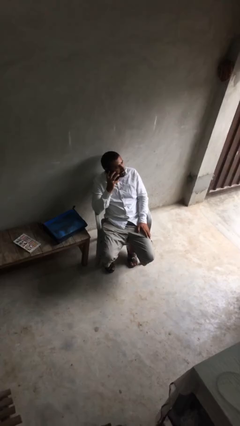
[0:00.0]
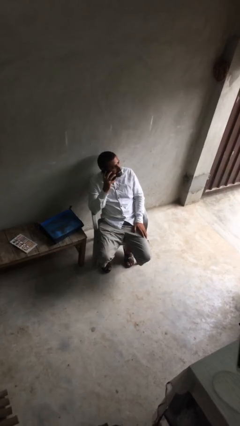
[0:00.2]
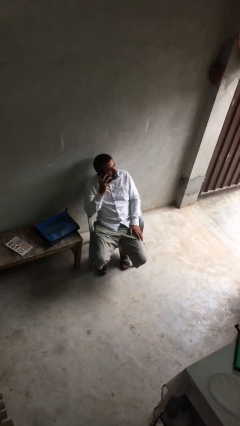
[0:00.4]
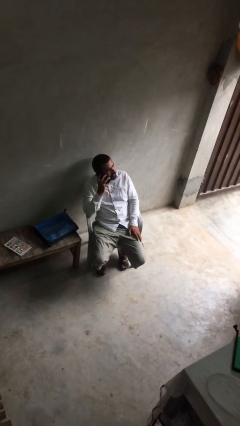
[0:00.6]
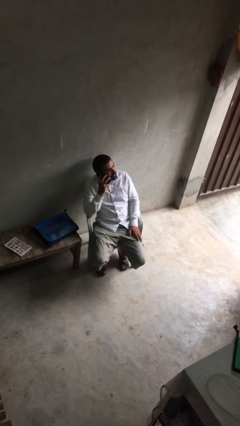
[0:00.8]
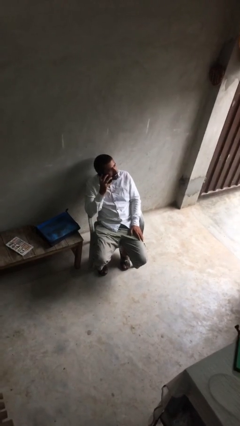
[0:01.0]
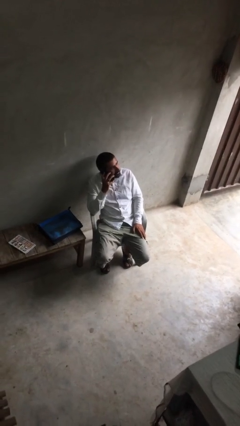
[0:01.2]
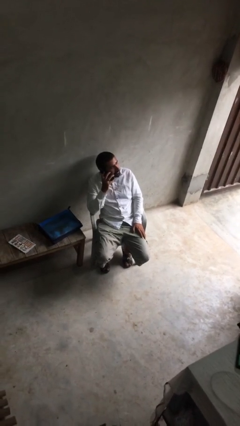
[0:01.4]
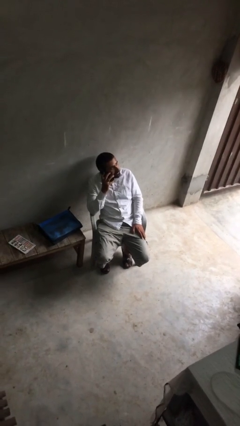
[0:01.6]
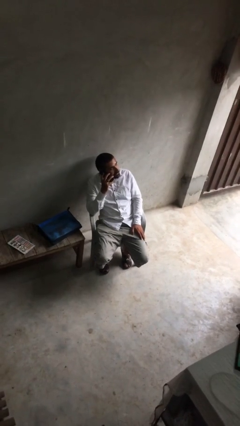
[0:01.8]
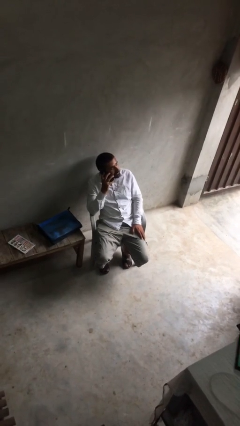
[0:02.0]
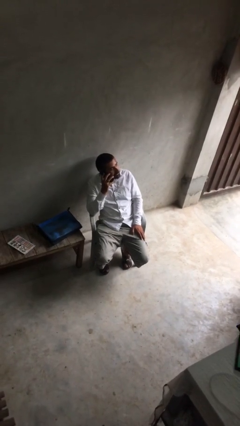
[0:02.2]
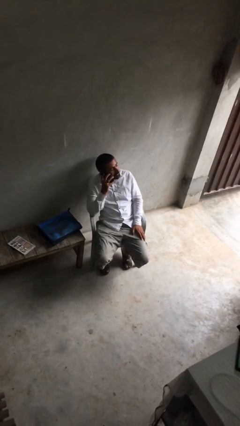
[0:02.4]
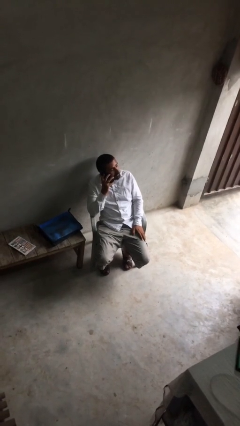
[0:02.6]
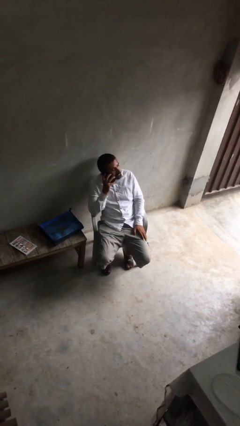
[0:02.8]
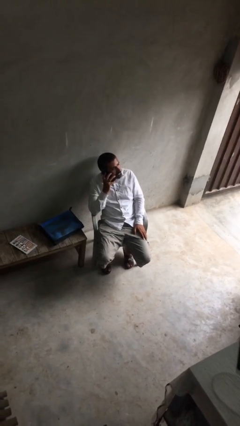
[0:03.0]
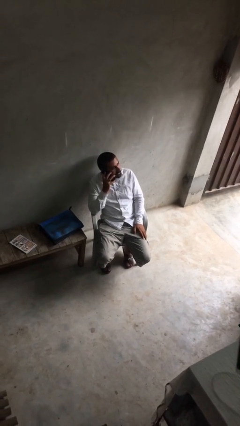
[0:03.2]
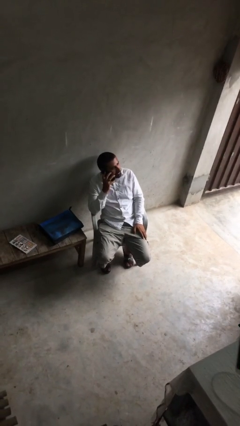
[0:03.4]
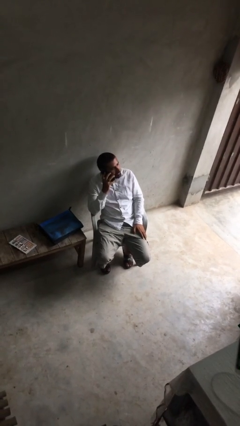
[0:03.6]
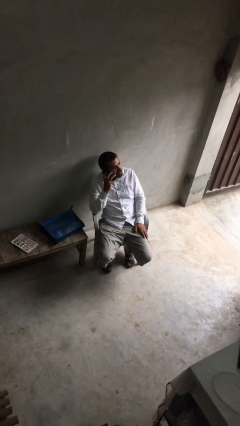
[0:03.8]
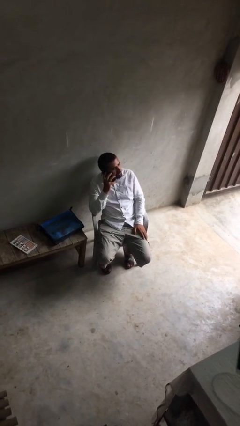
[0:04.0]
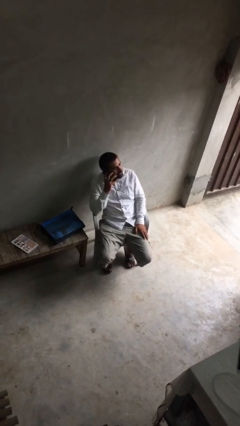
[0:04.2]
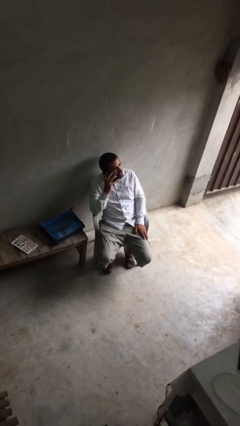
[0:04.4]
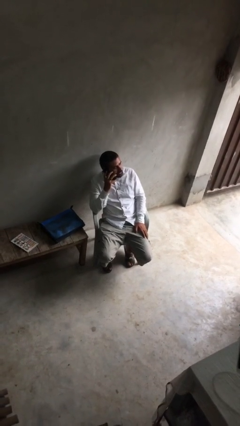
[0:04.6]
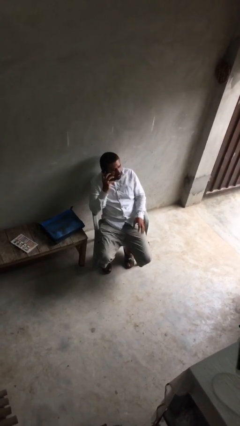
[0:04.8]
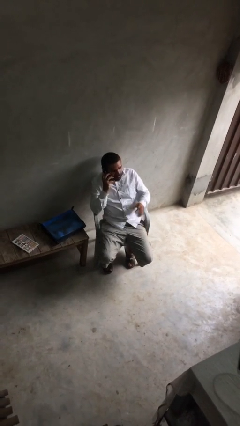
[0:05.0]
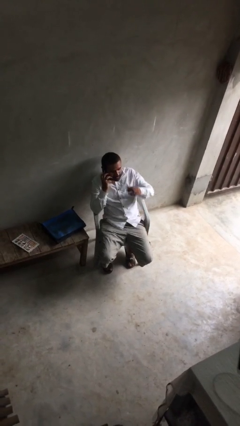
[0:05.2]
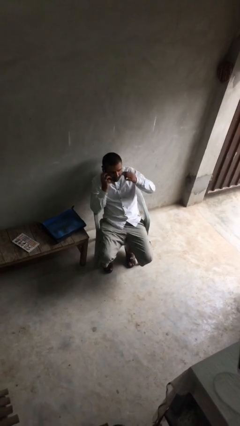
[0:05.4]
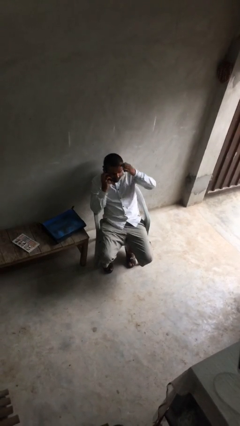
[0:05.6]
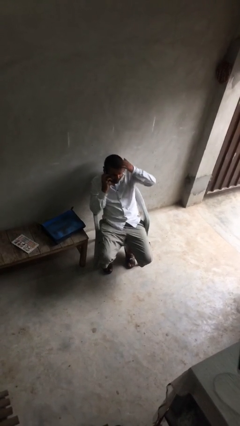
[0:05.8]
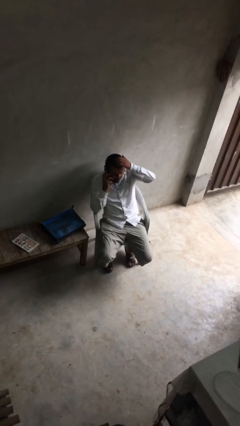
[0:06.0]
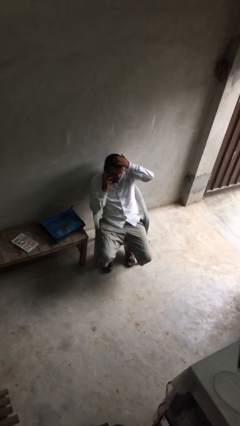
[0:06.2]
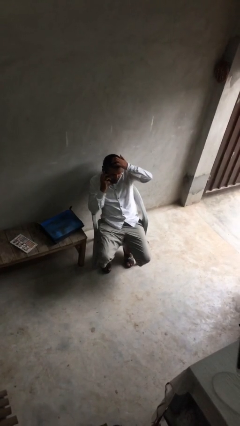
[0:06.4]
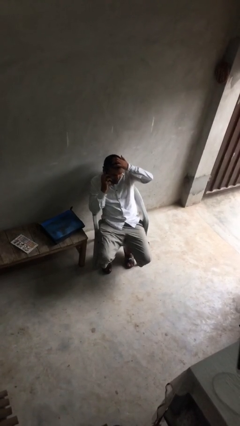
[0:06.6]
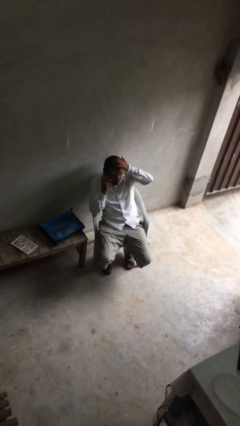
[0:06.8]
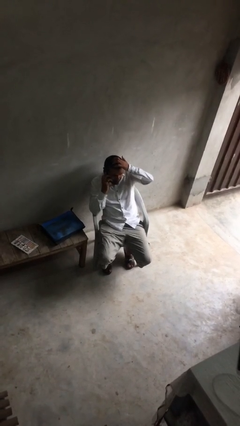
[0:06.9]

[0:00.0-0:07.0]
person talks on phone

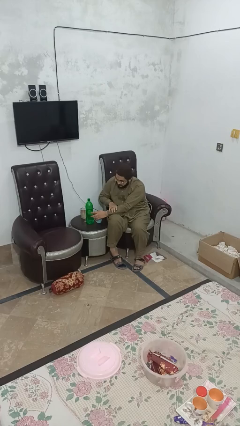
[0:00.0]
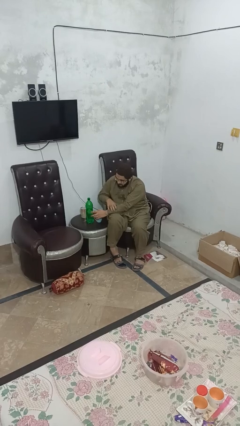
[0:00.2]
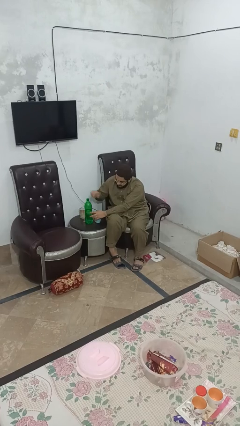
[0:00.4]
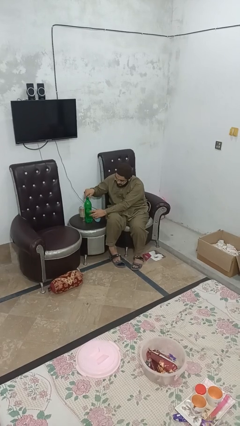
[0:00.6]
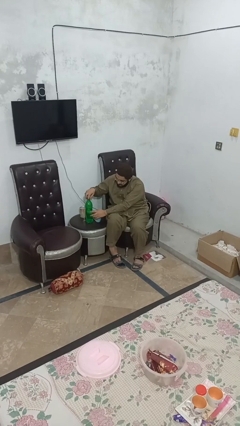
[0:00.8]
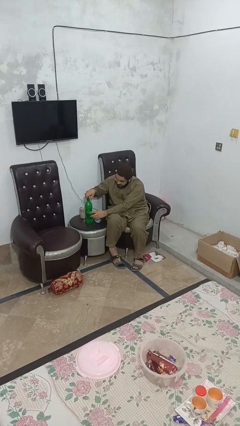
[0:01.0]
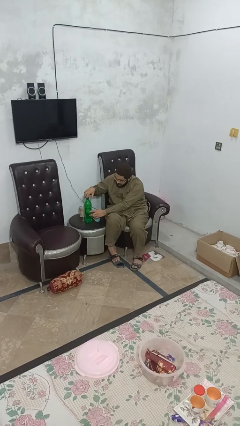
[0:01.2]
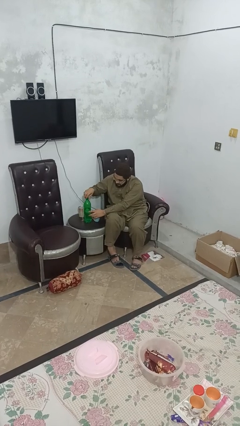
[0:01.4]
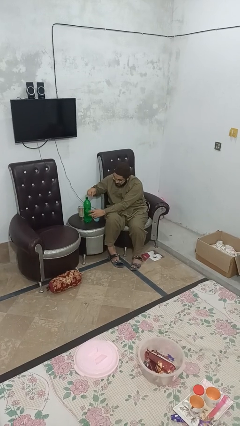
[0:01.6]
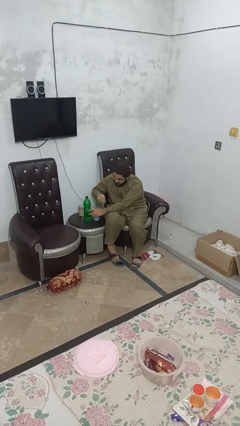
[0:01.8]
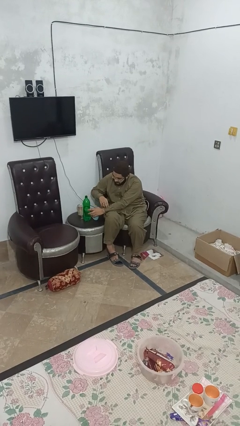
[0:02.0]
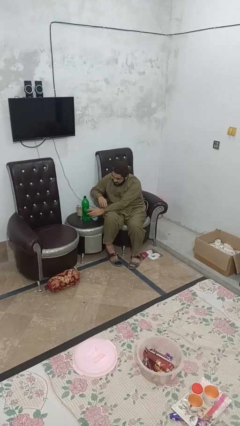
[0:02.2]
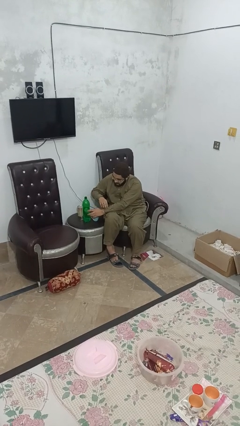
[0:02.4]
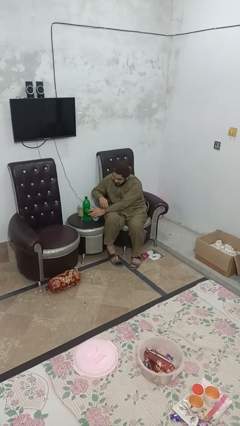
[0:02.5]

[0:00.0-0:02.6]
person unscrews lid from bottle

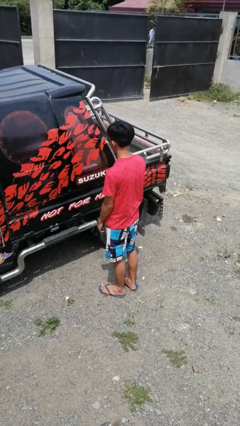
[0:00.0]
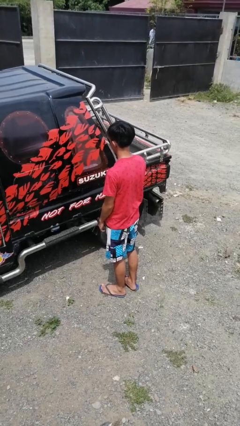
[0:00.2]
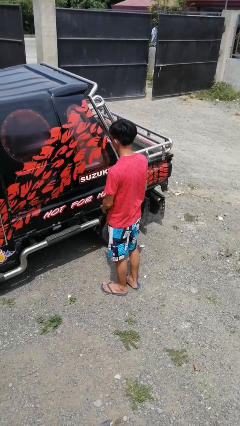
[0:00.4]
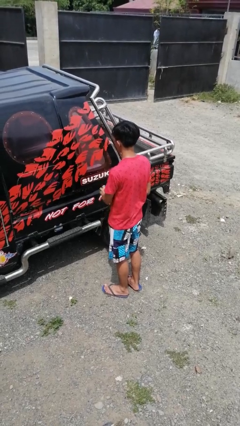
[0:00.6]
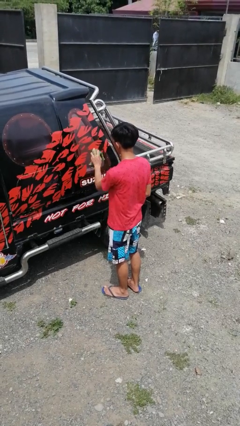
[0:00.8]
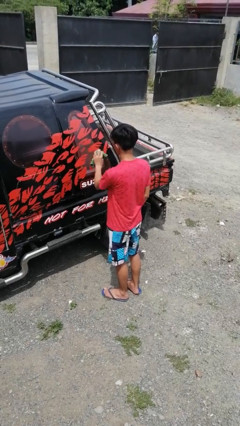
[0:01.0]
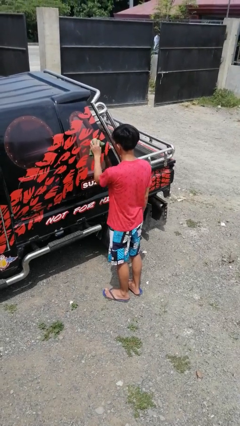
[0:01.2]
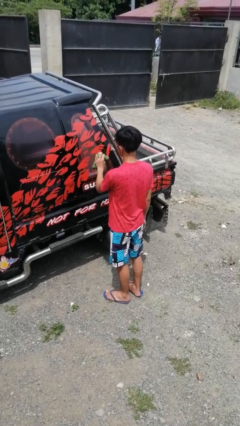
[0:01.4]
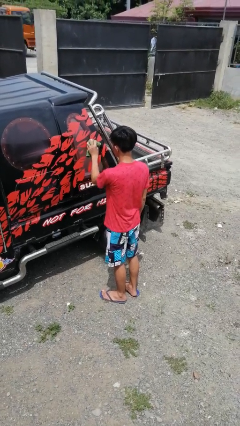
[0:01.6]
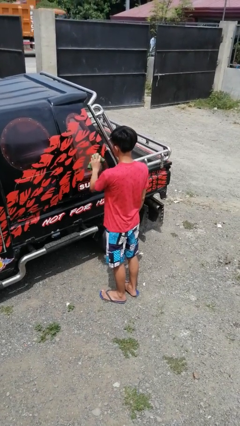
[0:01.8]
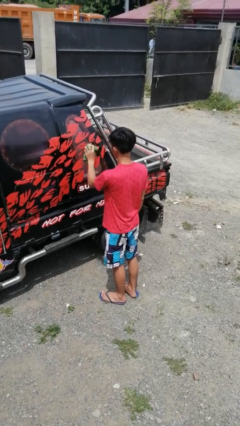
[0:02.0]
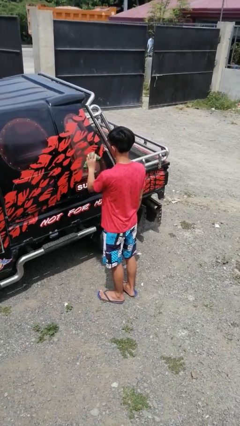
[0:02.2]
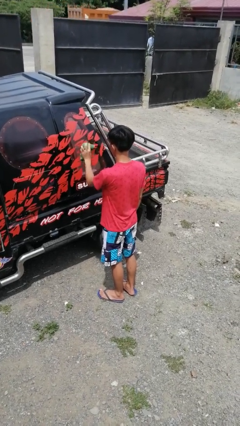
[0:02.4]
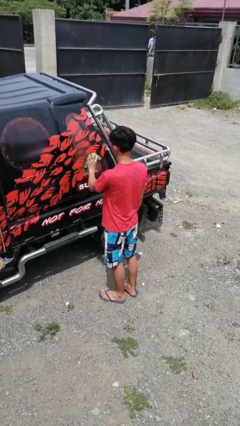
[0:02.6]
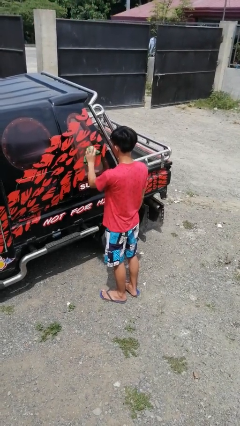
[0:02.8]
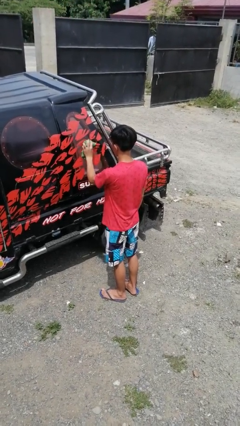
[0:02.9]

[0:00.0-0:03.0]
person polishes car with rag

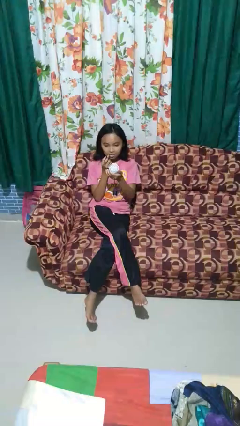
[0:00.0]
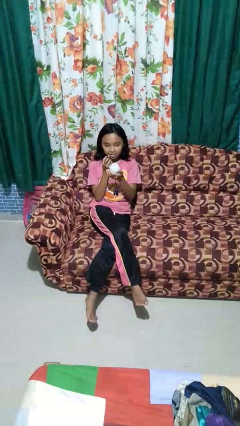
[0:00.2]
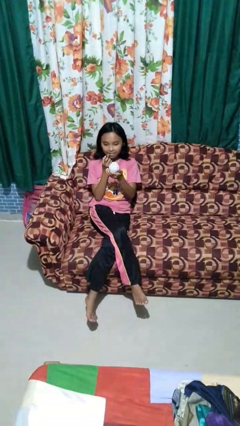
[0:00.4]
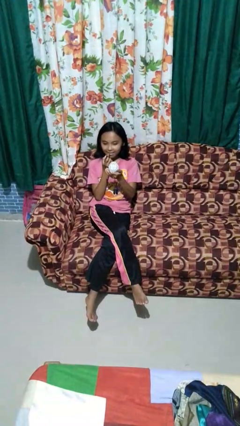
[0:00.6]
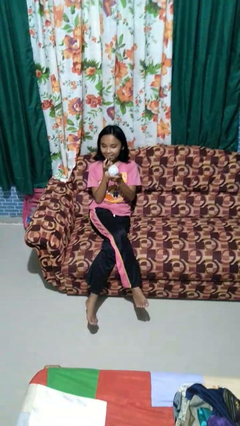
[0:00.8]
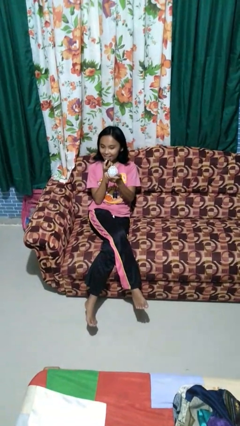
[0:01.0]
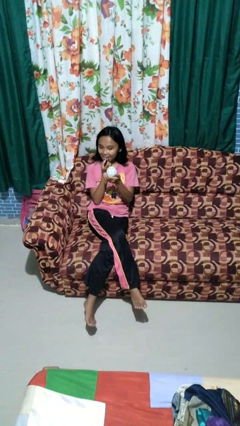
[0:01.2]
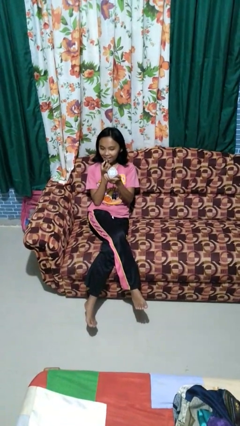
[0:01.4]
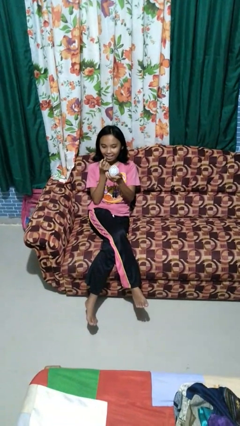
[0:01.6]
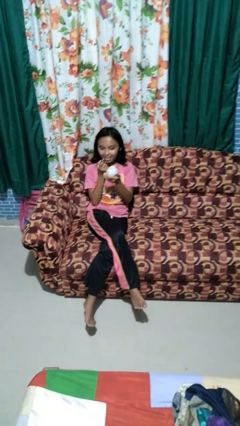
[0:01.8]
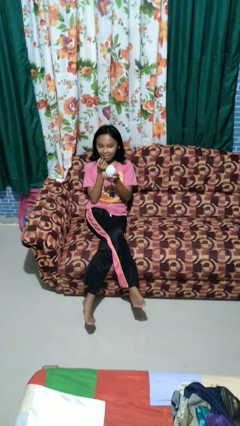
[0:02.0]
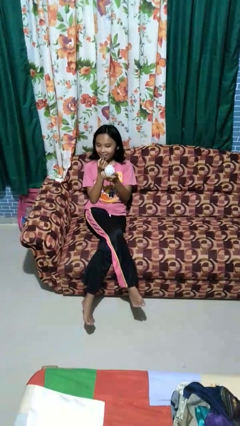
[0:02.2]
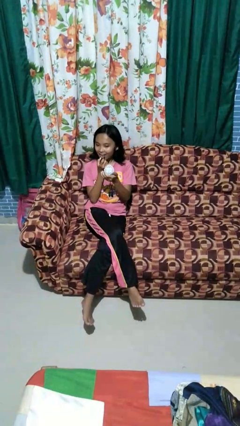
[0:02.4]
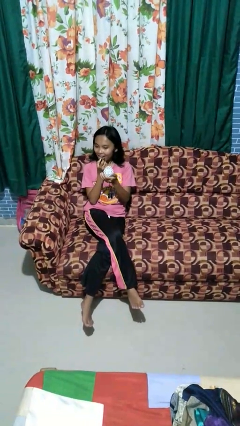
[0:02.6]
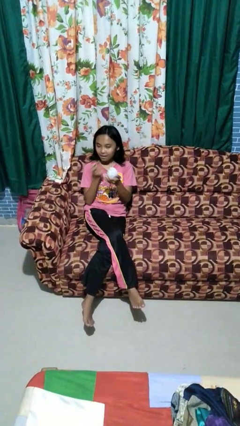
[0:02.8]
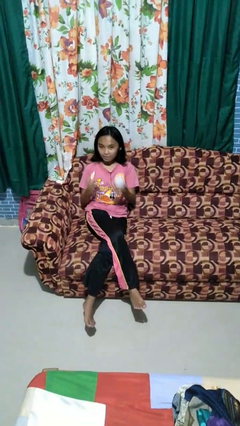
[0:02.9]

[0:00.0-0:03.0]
person applies lip makeup

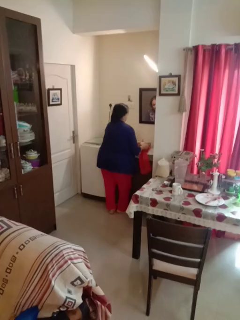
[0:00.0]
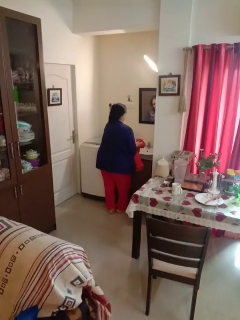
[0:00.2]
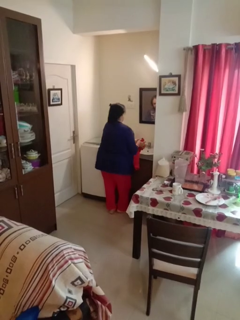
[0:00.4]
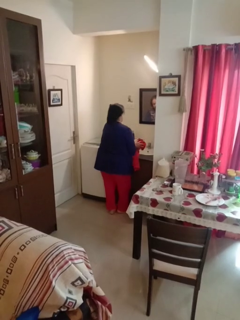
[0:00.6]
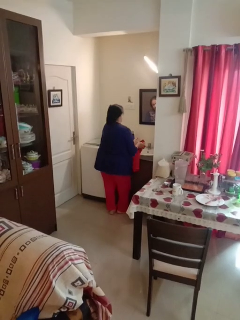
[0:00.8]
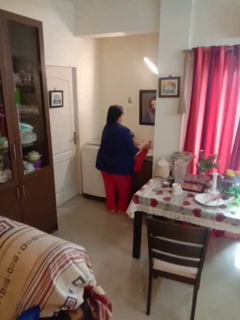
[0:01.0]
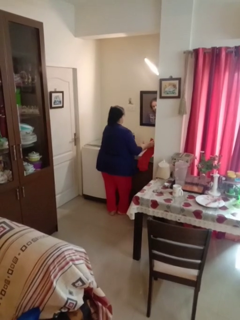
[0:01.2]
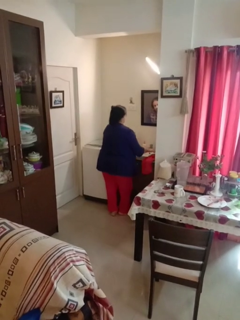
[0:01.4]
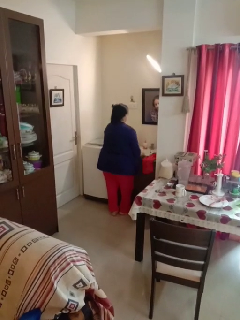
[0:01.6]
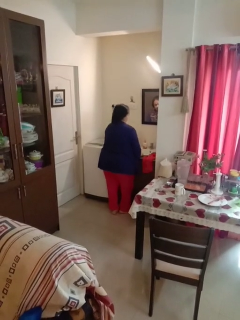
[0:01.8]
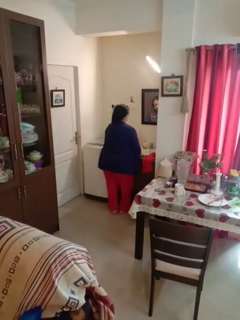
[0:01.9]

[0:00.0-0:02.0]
person dries hands with towel

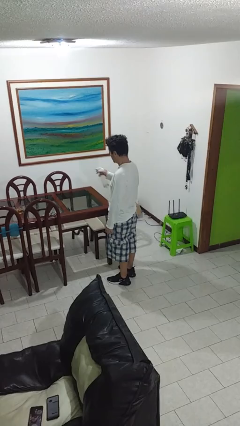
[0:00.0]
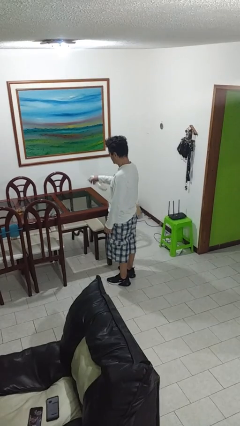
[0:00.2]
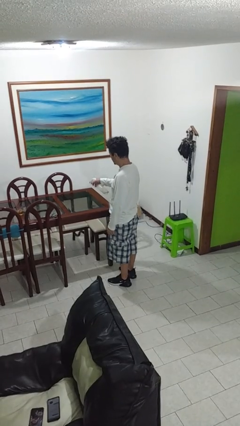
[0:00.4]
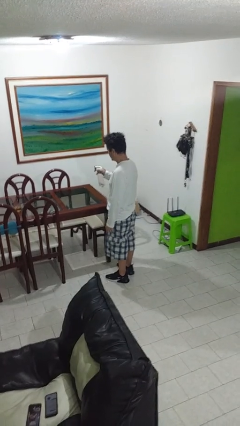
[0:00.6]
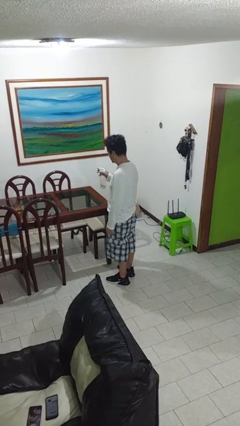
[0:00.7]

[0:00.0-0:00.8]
person sprays from bottle
